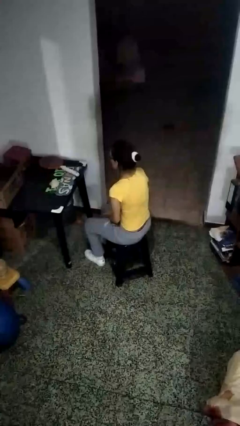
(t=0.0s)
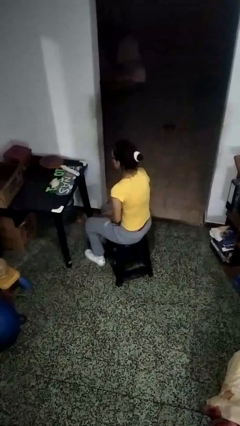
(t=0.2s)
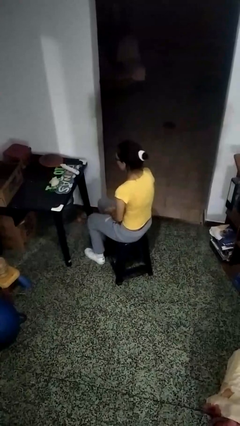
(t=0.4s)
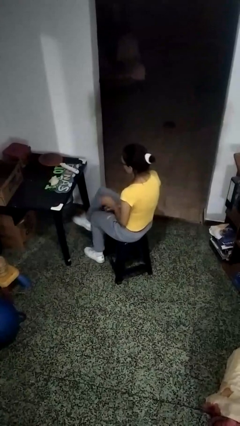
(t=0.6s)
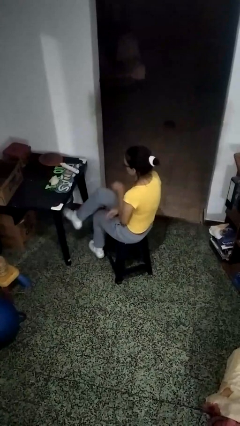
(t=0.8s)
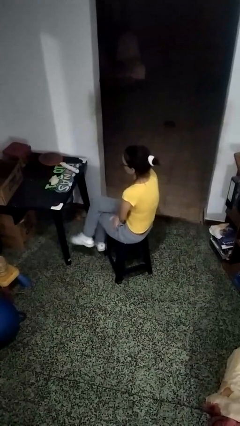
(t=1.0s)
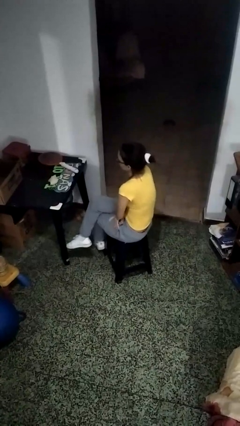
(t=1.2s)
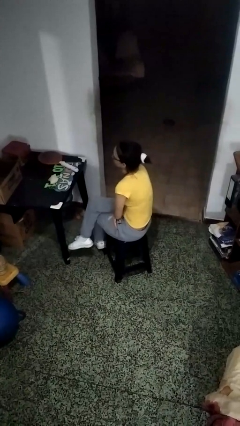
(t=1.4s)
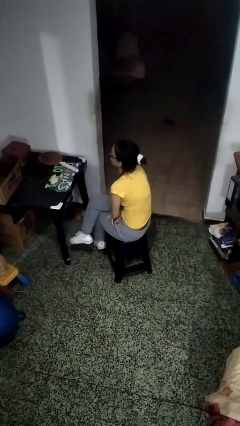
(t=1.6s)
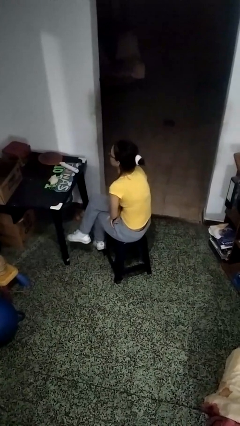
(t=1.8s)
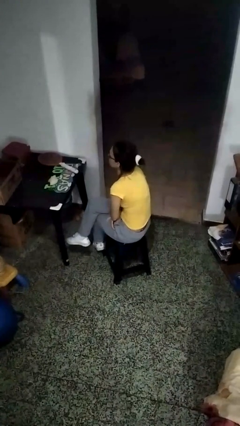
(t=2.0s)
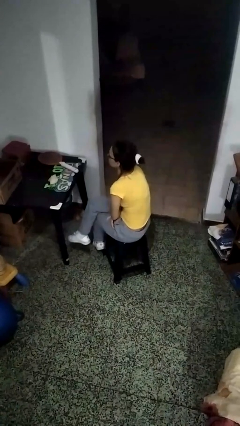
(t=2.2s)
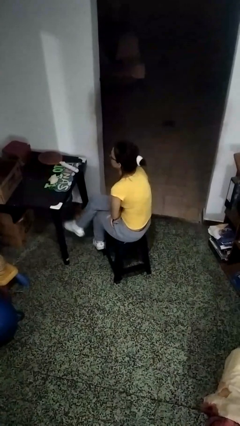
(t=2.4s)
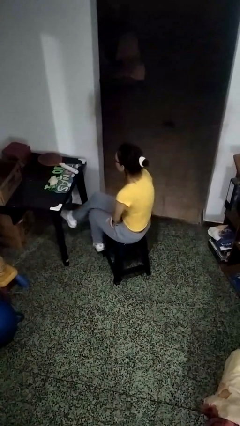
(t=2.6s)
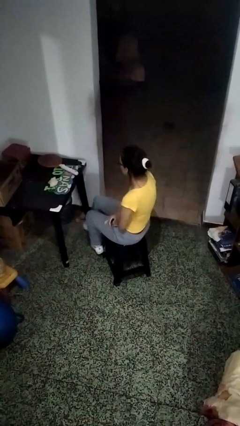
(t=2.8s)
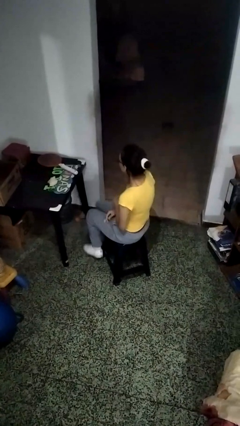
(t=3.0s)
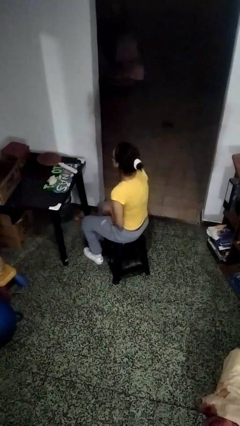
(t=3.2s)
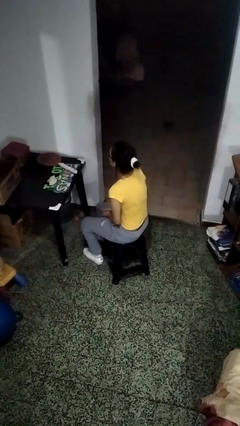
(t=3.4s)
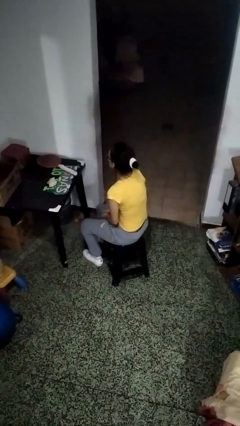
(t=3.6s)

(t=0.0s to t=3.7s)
person crosses legs

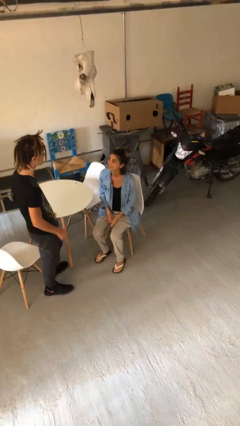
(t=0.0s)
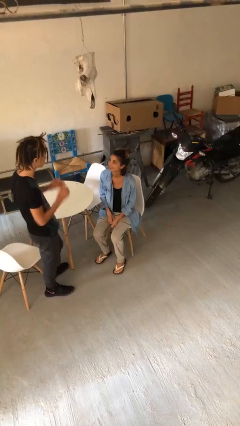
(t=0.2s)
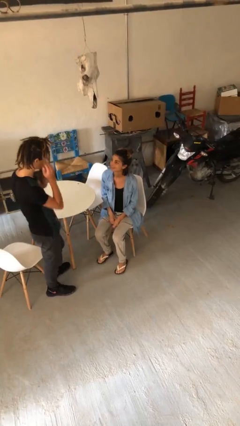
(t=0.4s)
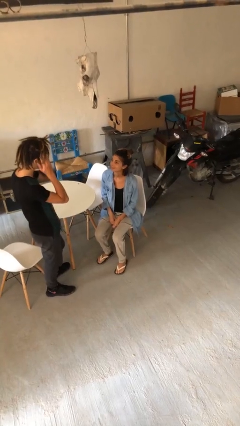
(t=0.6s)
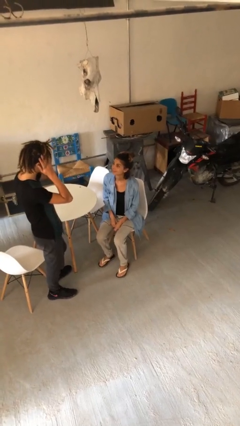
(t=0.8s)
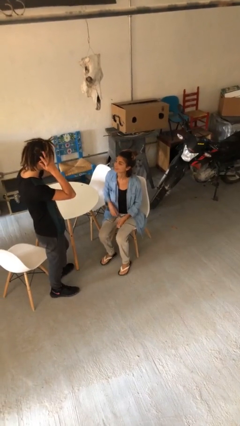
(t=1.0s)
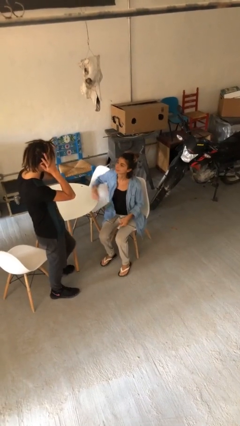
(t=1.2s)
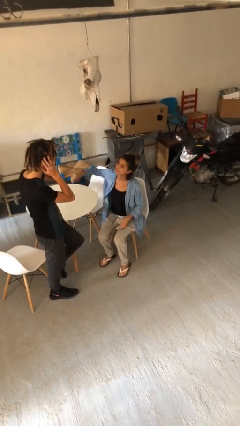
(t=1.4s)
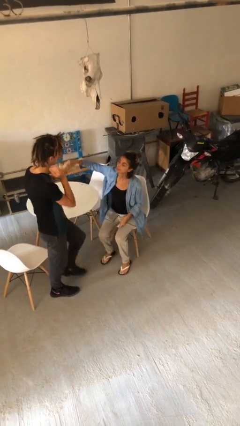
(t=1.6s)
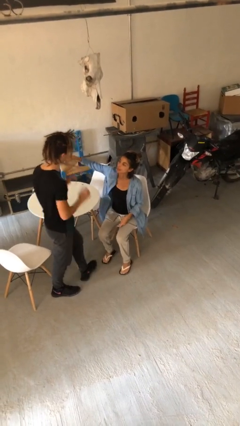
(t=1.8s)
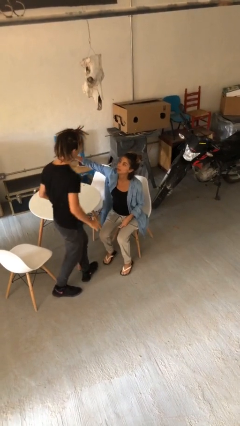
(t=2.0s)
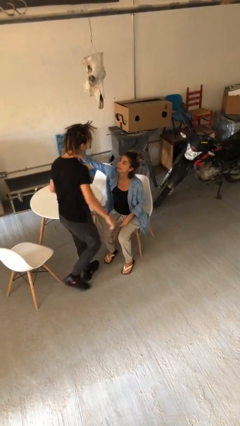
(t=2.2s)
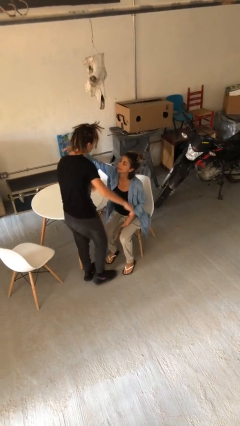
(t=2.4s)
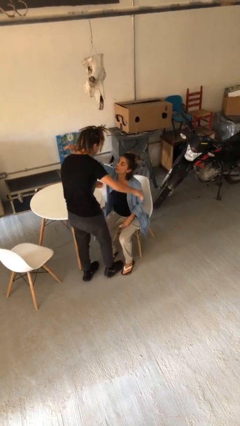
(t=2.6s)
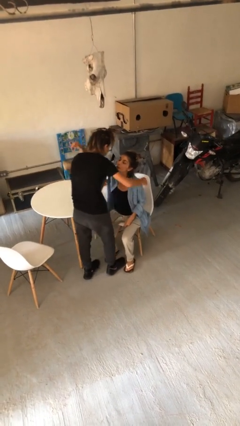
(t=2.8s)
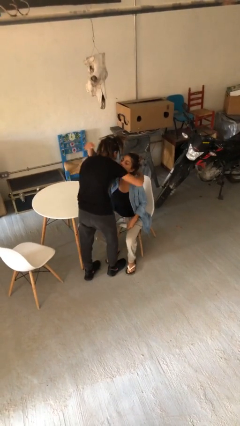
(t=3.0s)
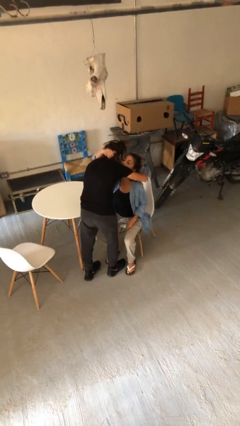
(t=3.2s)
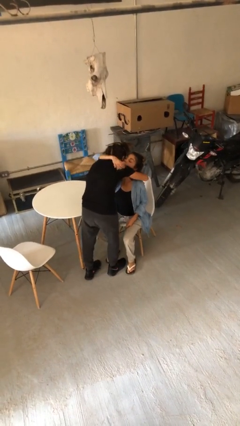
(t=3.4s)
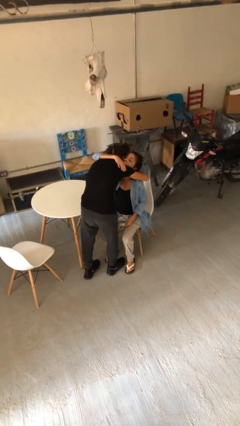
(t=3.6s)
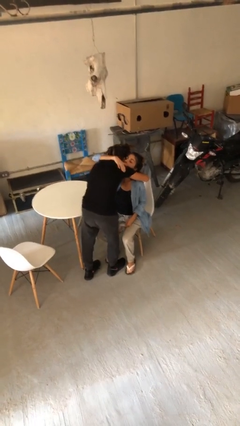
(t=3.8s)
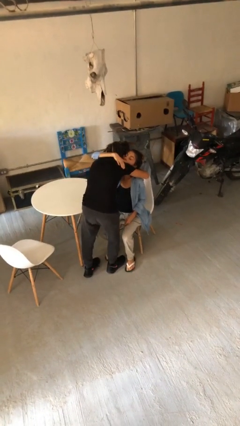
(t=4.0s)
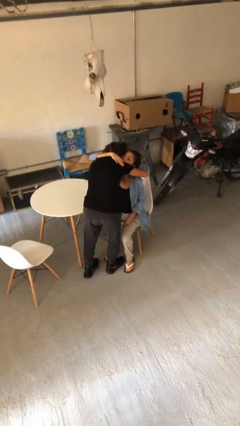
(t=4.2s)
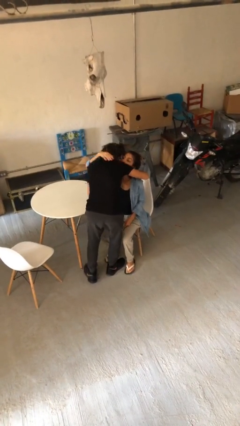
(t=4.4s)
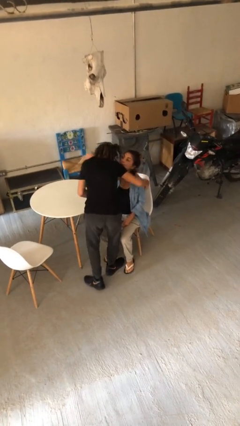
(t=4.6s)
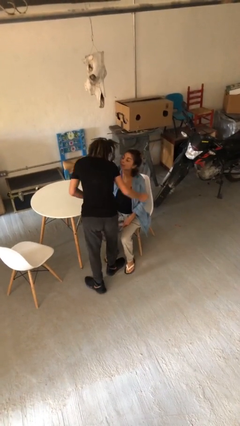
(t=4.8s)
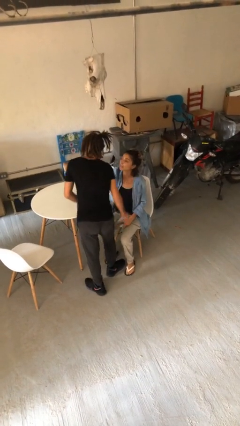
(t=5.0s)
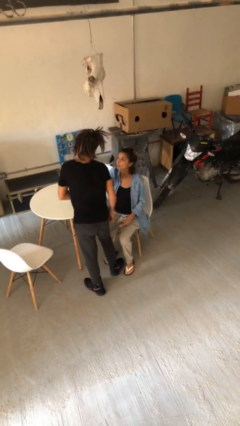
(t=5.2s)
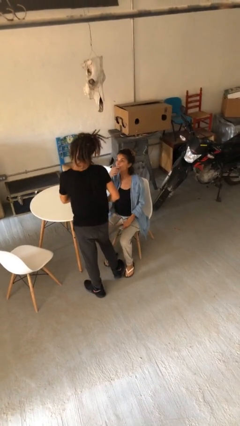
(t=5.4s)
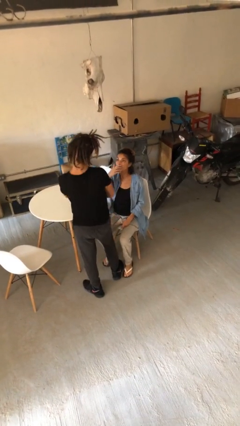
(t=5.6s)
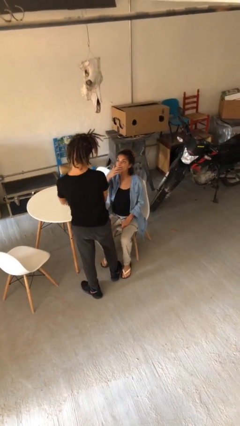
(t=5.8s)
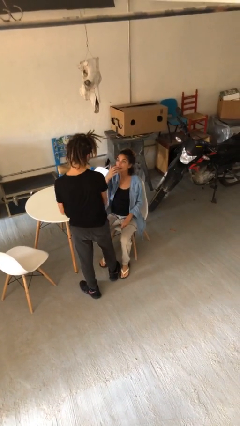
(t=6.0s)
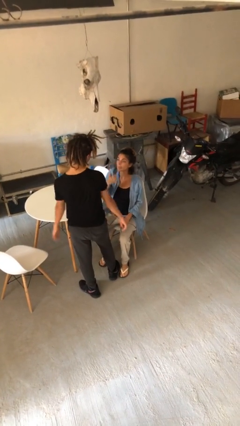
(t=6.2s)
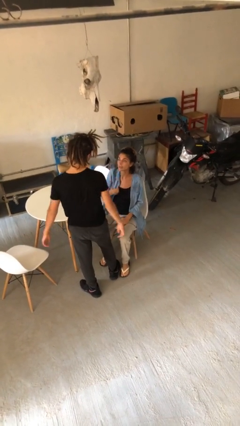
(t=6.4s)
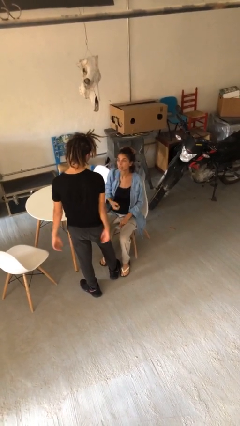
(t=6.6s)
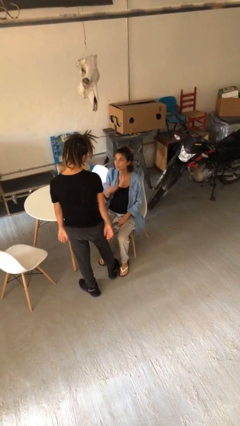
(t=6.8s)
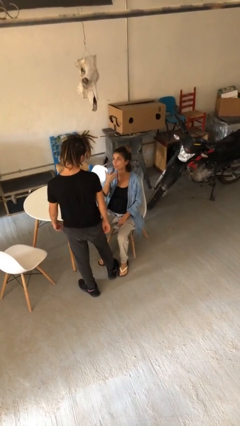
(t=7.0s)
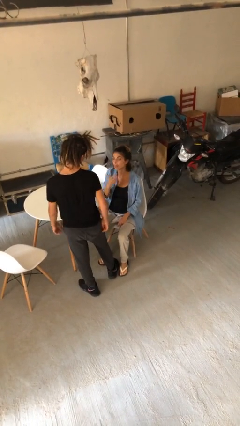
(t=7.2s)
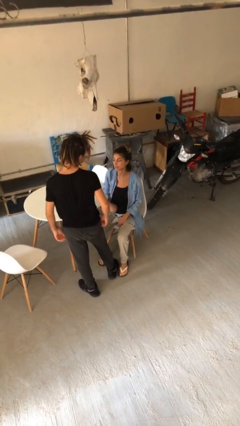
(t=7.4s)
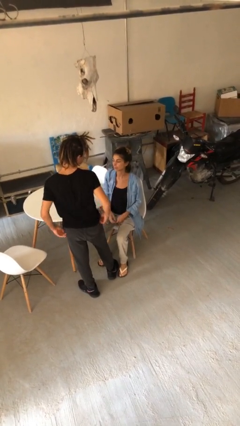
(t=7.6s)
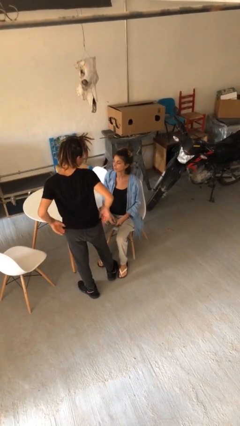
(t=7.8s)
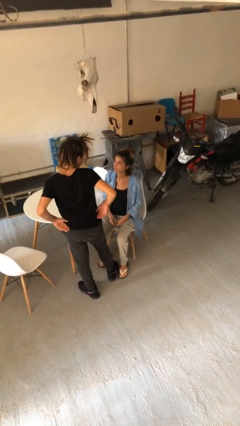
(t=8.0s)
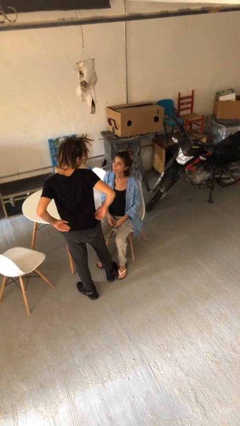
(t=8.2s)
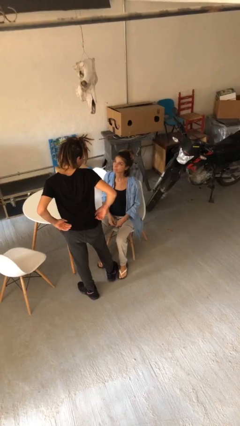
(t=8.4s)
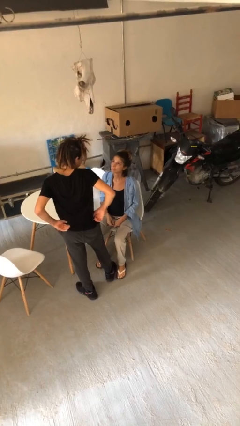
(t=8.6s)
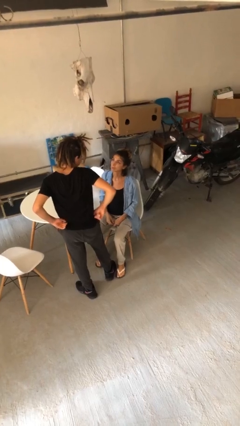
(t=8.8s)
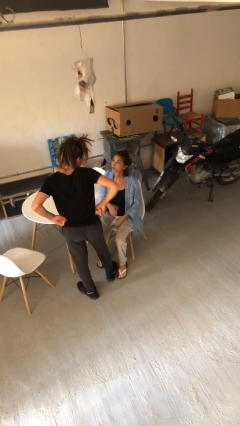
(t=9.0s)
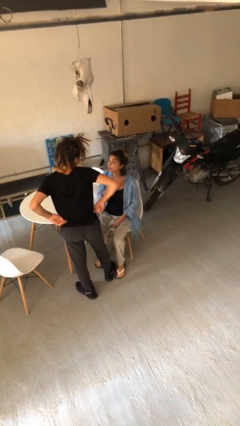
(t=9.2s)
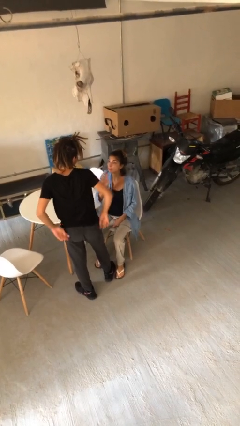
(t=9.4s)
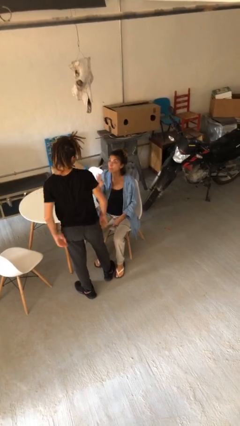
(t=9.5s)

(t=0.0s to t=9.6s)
person embraces person

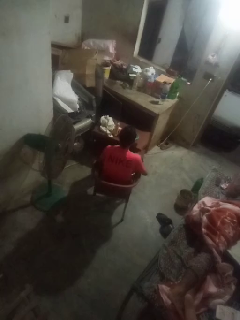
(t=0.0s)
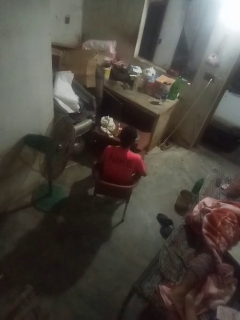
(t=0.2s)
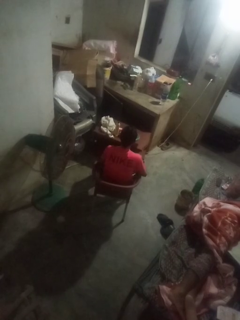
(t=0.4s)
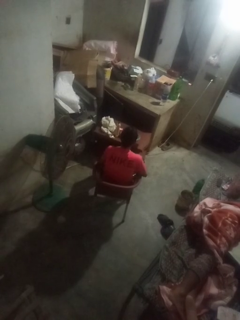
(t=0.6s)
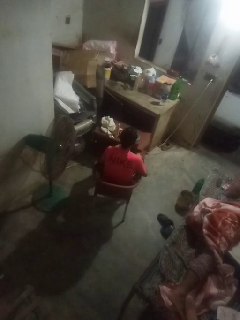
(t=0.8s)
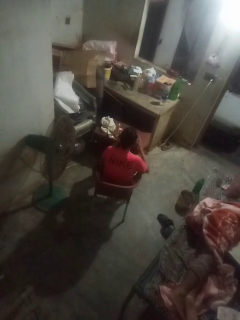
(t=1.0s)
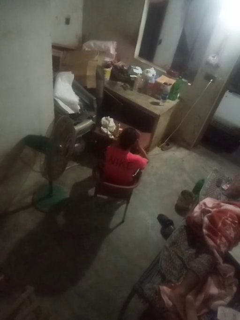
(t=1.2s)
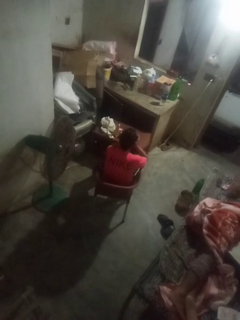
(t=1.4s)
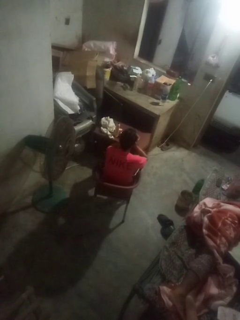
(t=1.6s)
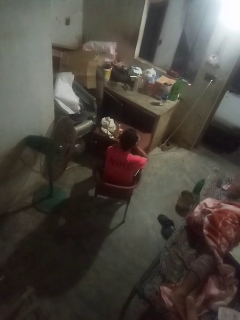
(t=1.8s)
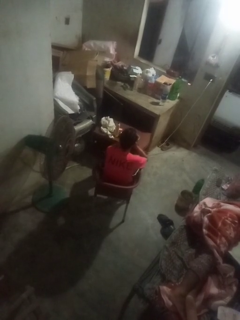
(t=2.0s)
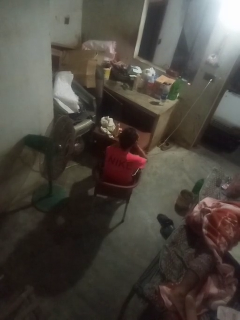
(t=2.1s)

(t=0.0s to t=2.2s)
person yawns

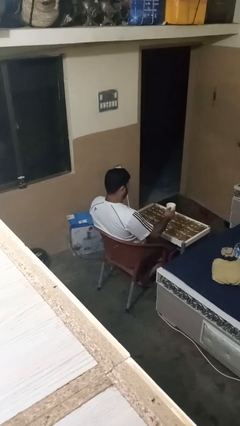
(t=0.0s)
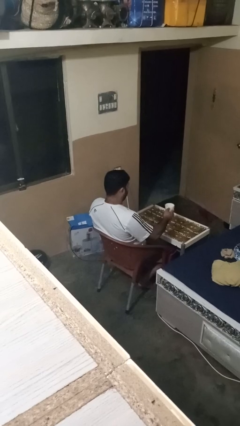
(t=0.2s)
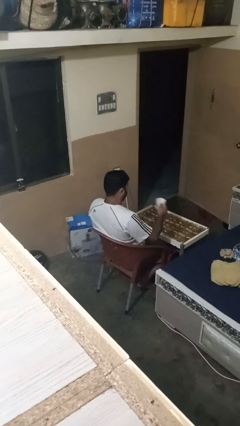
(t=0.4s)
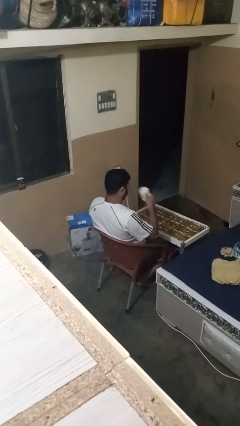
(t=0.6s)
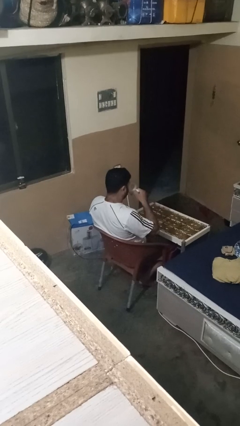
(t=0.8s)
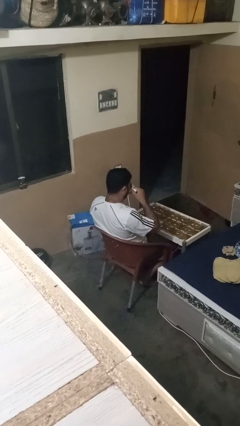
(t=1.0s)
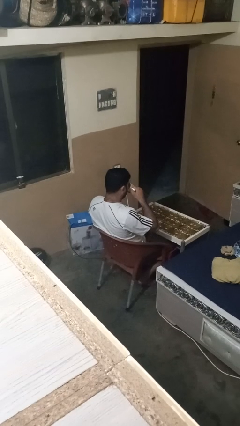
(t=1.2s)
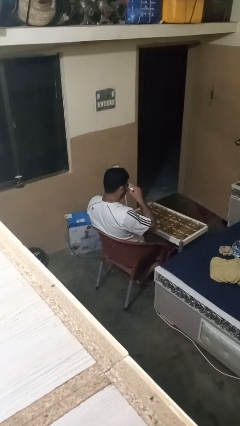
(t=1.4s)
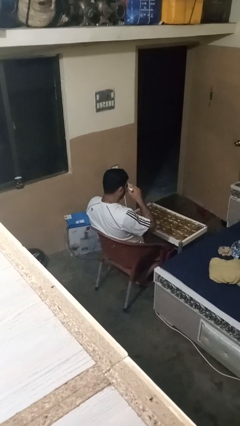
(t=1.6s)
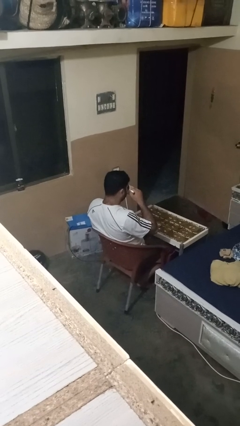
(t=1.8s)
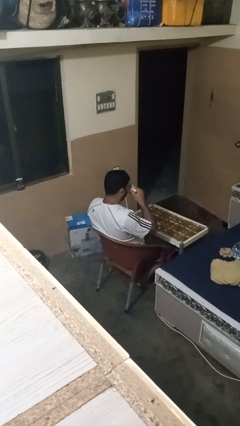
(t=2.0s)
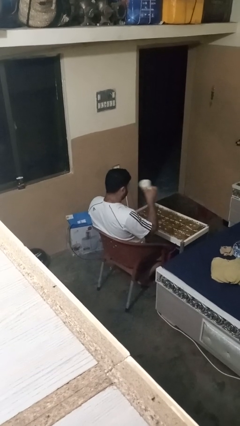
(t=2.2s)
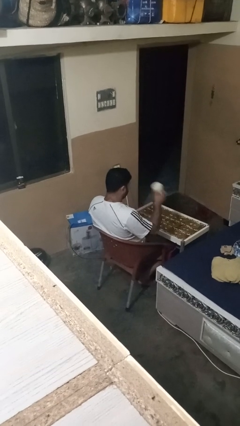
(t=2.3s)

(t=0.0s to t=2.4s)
person drinks from mug
